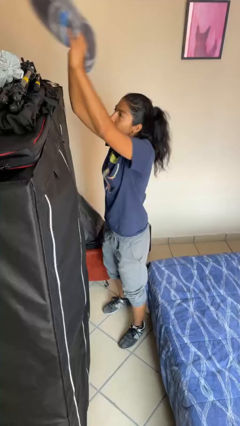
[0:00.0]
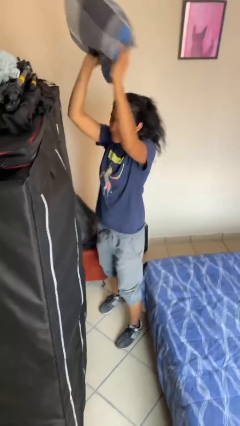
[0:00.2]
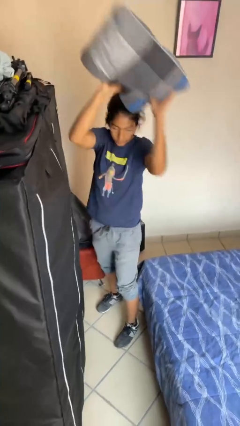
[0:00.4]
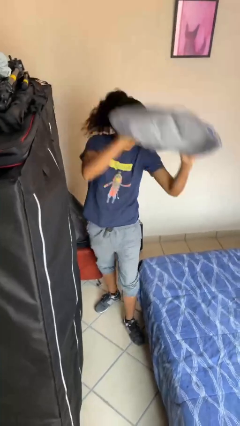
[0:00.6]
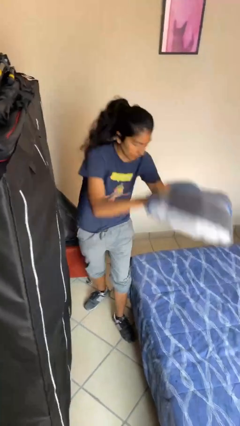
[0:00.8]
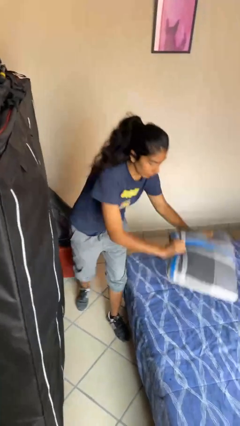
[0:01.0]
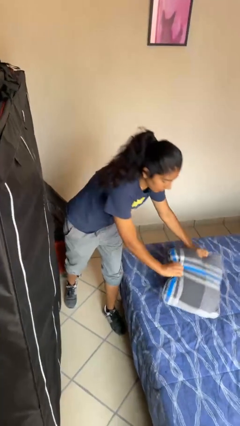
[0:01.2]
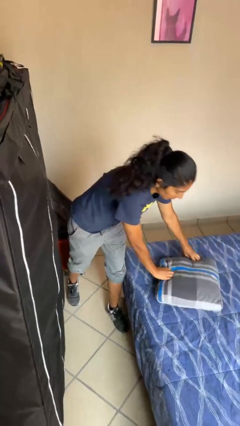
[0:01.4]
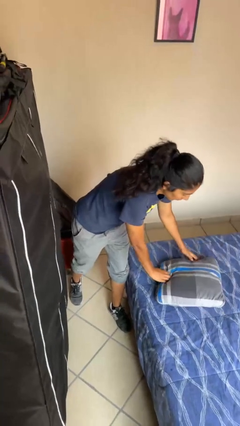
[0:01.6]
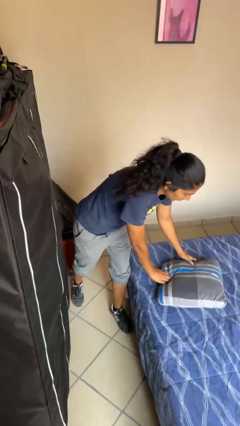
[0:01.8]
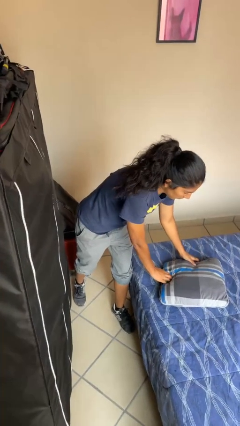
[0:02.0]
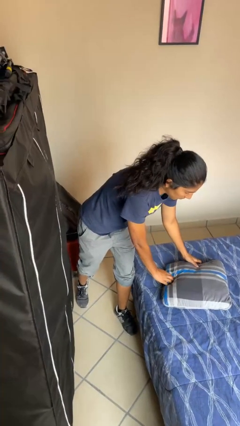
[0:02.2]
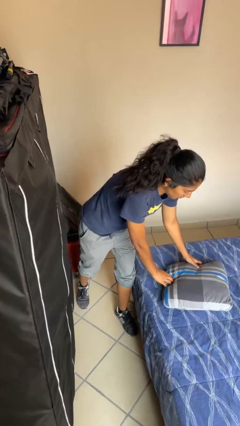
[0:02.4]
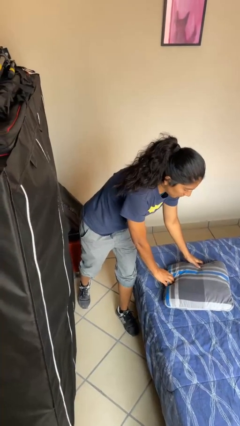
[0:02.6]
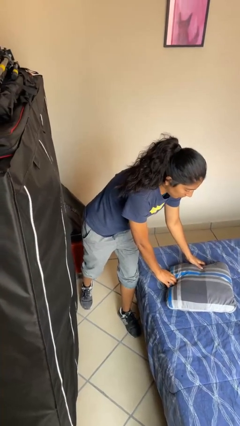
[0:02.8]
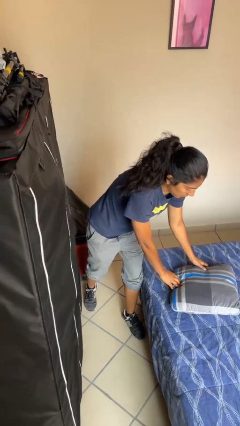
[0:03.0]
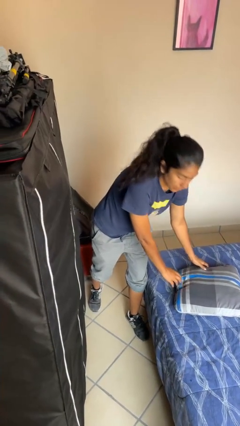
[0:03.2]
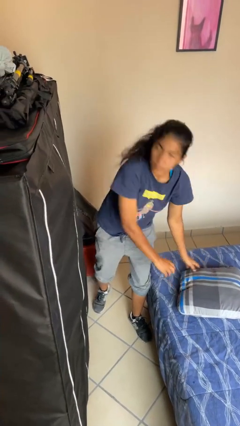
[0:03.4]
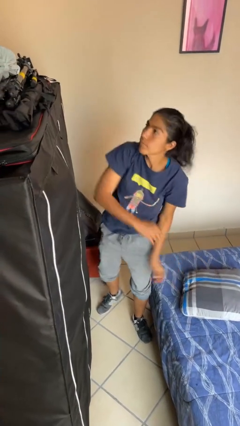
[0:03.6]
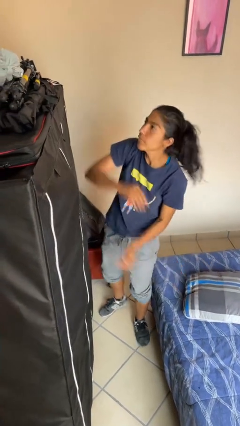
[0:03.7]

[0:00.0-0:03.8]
person puts down object on shelf

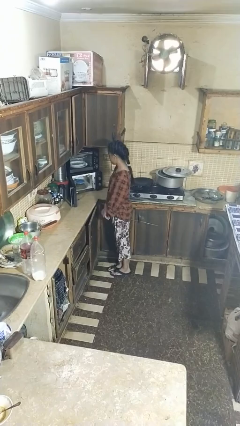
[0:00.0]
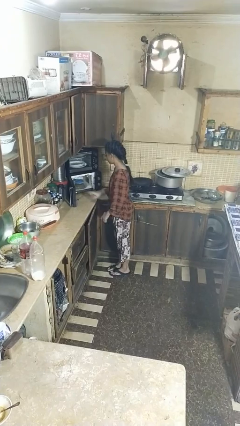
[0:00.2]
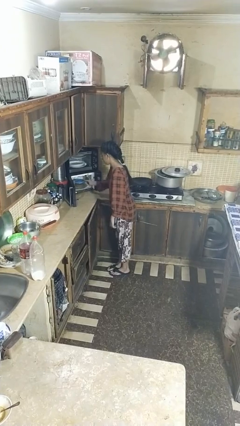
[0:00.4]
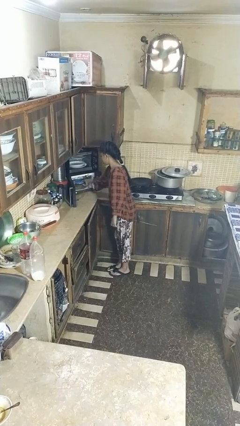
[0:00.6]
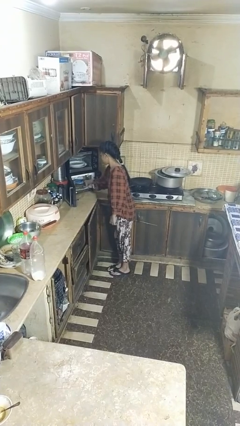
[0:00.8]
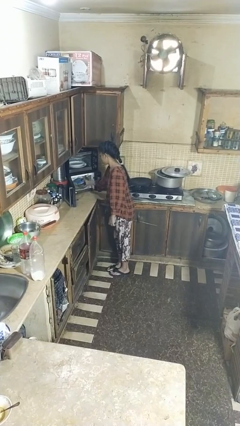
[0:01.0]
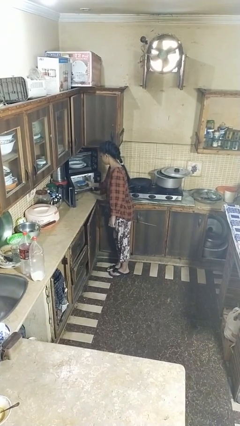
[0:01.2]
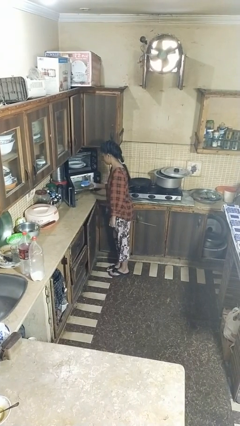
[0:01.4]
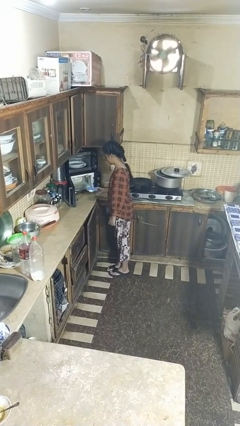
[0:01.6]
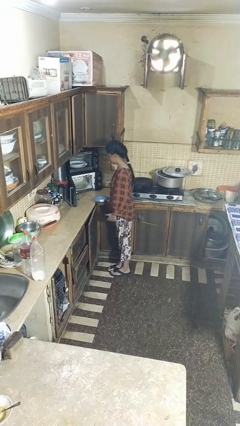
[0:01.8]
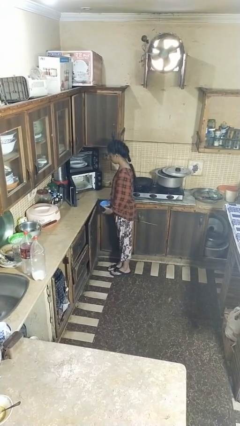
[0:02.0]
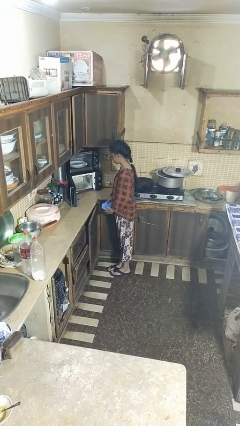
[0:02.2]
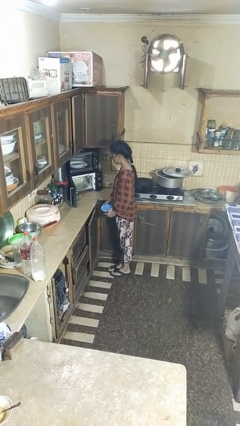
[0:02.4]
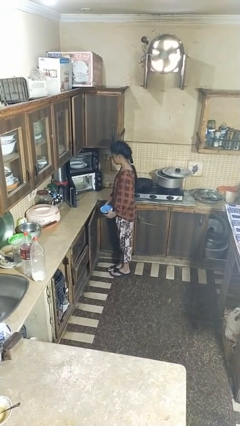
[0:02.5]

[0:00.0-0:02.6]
person takes object from microwave

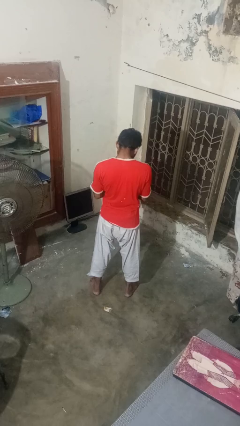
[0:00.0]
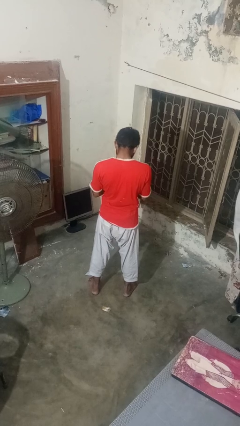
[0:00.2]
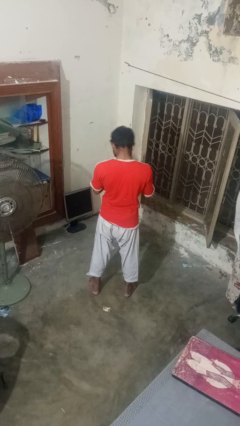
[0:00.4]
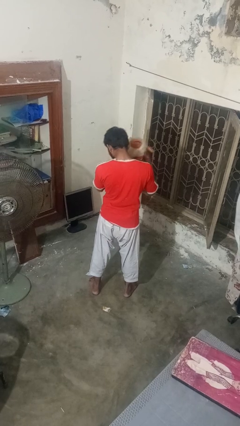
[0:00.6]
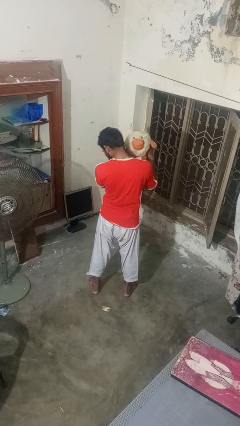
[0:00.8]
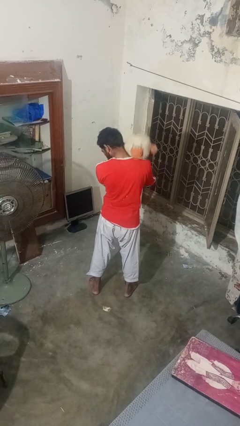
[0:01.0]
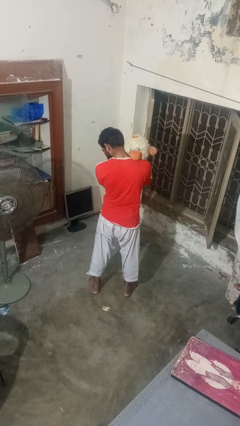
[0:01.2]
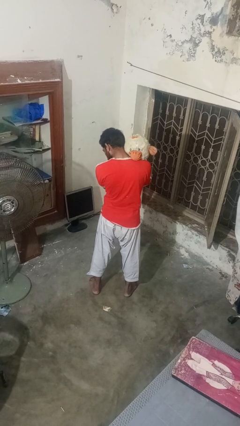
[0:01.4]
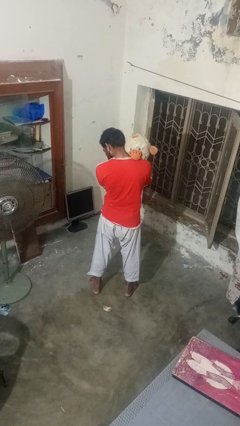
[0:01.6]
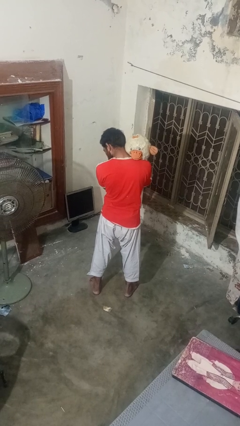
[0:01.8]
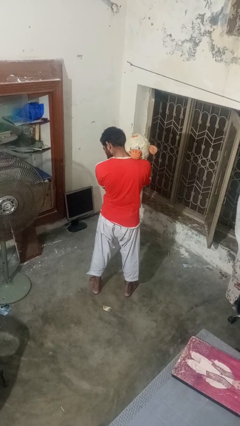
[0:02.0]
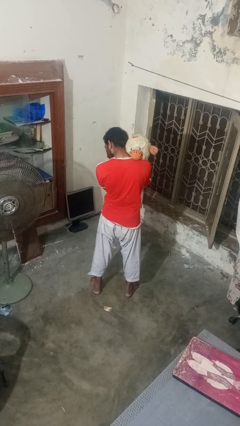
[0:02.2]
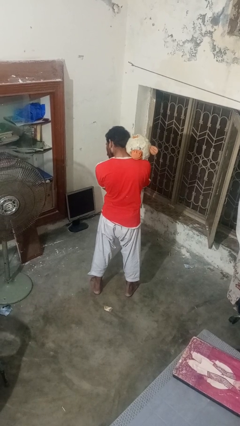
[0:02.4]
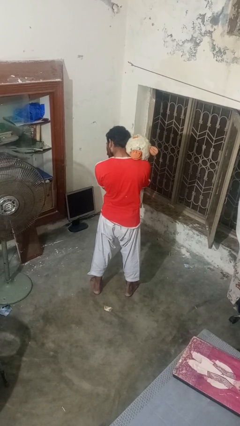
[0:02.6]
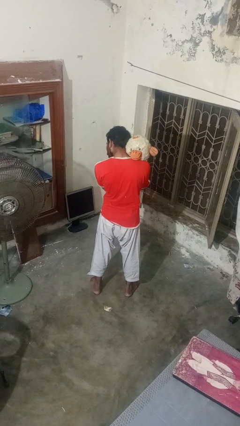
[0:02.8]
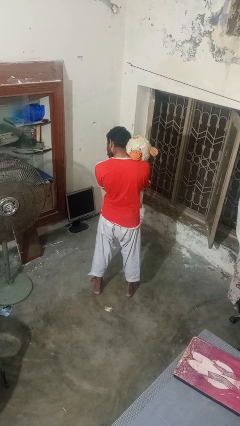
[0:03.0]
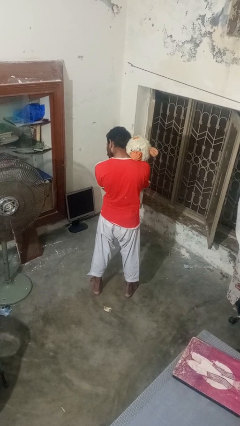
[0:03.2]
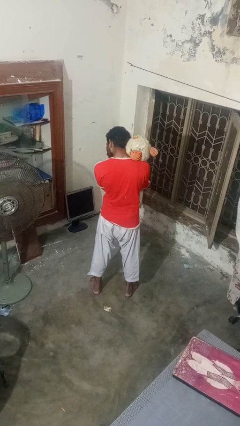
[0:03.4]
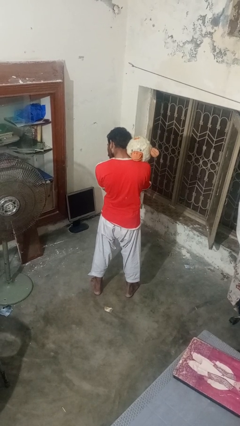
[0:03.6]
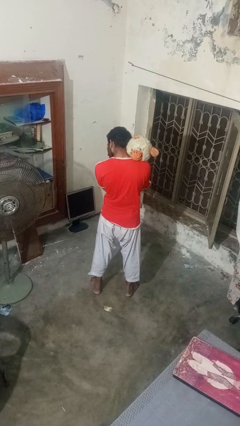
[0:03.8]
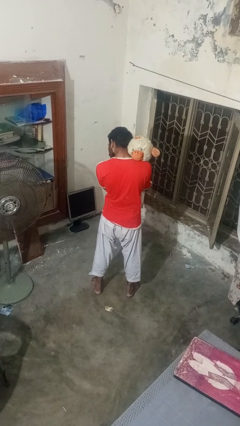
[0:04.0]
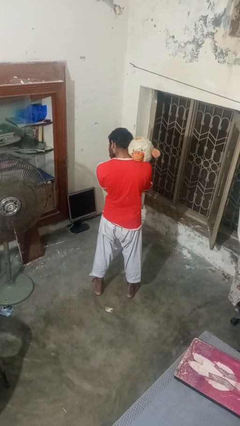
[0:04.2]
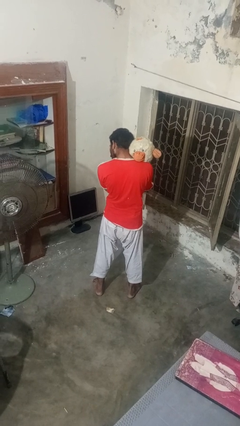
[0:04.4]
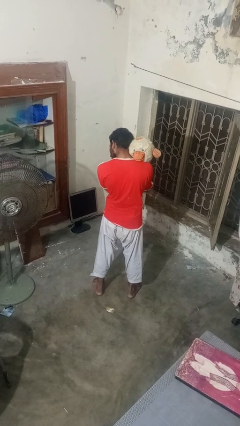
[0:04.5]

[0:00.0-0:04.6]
person hugs stuffed animal

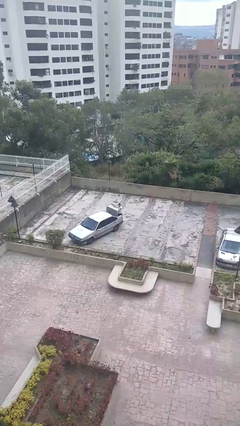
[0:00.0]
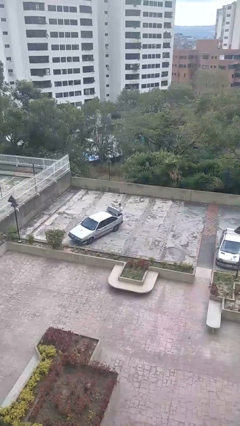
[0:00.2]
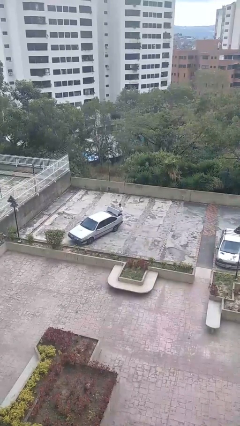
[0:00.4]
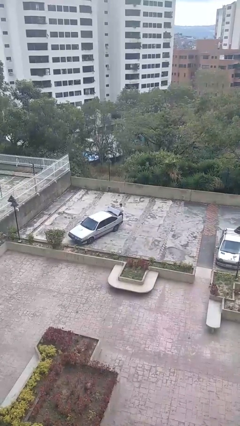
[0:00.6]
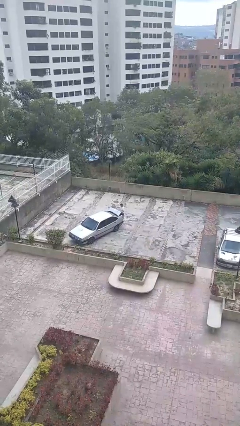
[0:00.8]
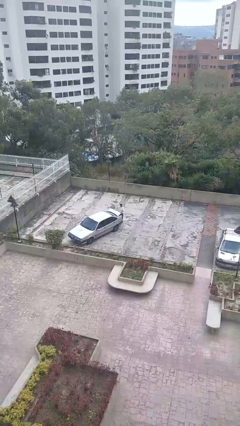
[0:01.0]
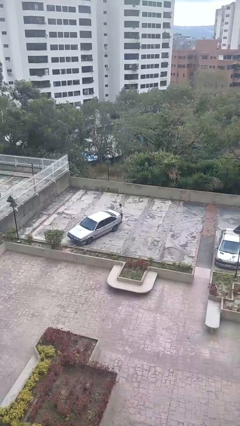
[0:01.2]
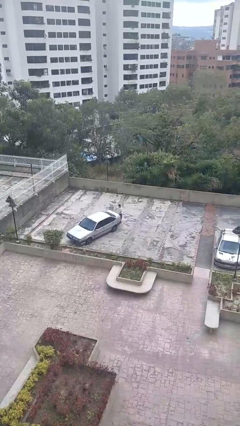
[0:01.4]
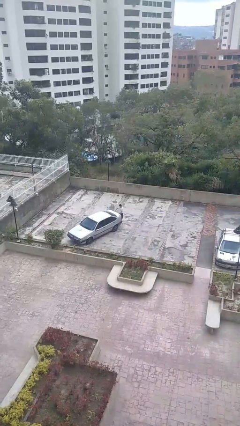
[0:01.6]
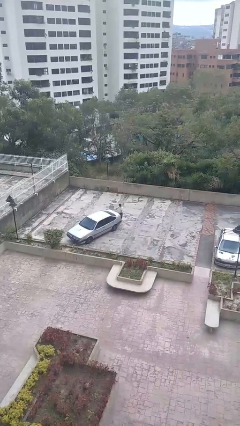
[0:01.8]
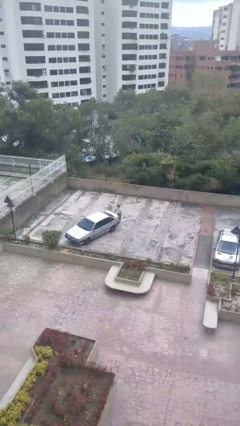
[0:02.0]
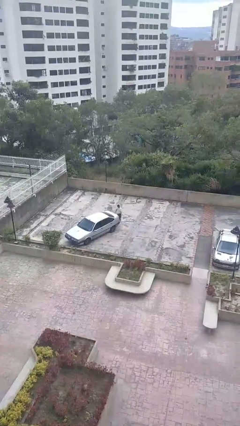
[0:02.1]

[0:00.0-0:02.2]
person closes car trunk

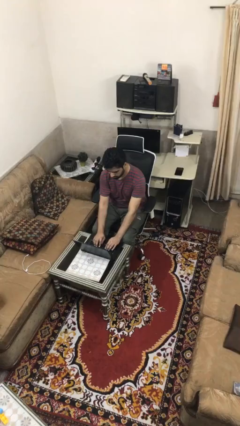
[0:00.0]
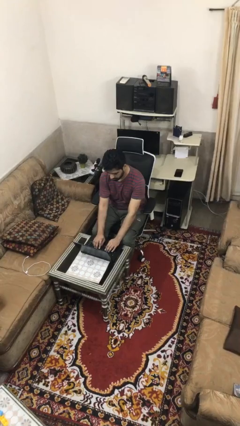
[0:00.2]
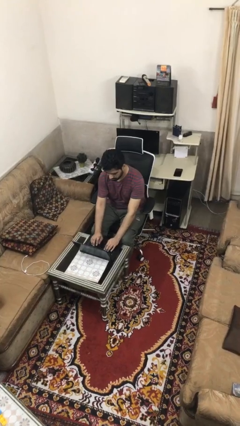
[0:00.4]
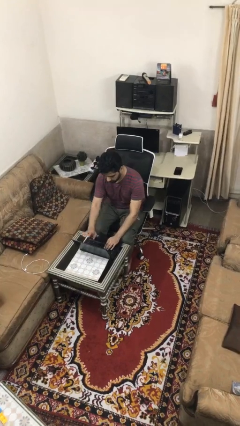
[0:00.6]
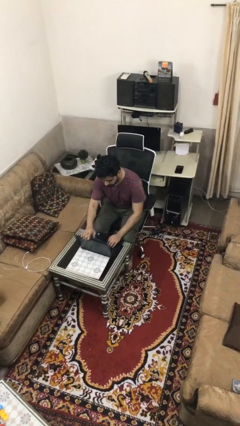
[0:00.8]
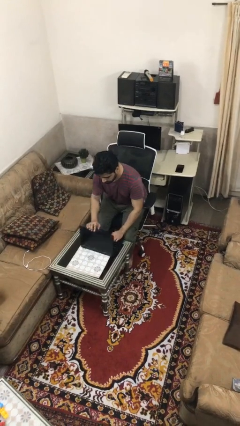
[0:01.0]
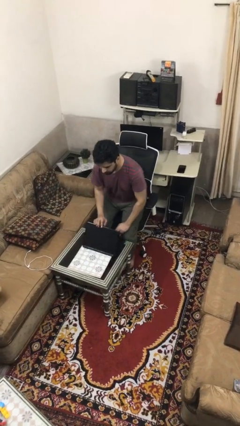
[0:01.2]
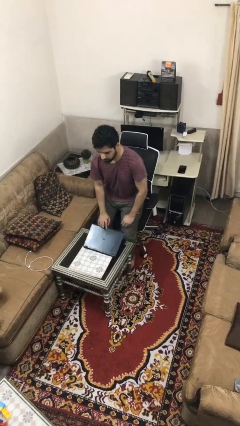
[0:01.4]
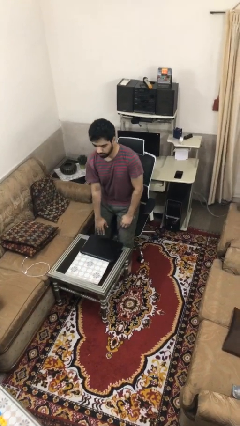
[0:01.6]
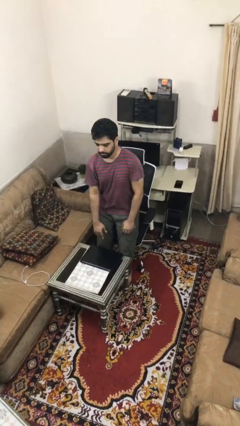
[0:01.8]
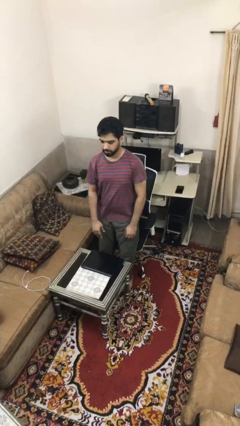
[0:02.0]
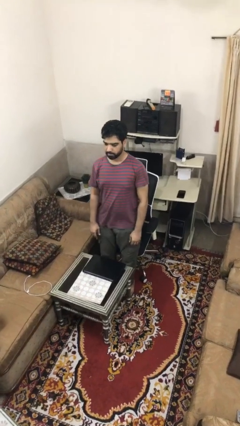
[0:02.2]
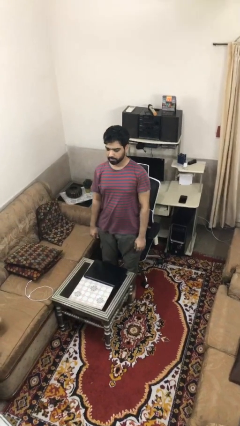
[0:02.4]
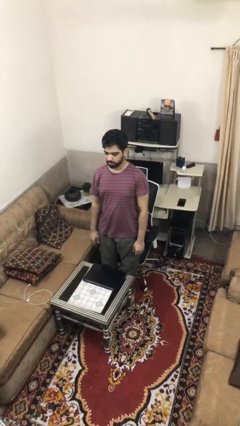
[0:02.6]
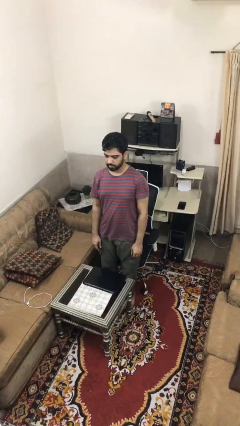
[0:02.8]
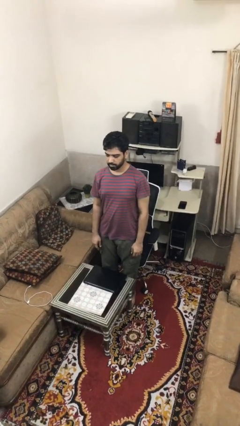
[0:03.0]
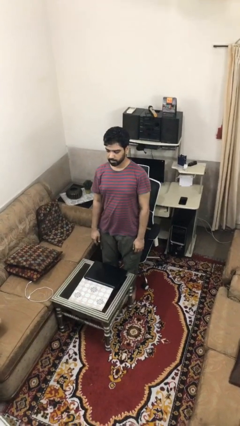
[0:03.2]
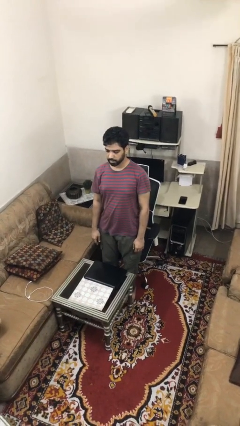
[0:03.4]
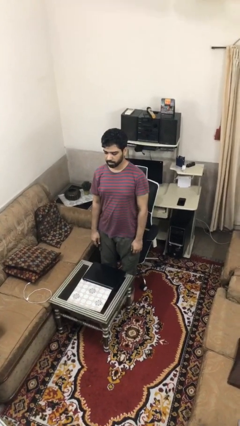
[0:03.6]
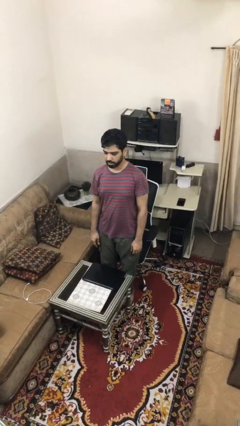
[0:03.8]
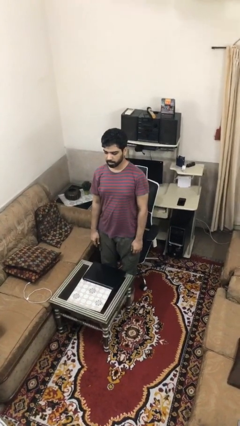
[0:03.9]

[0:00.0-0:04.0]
person stands up

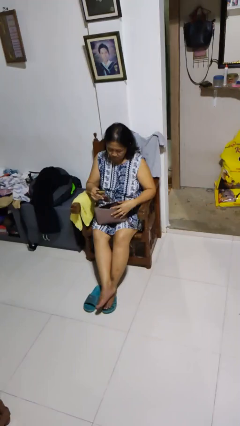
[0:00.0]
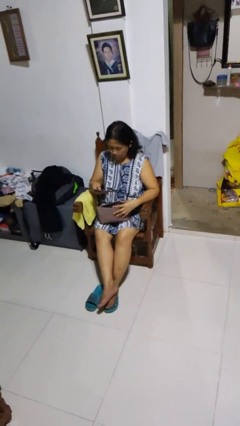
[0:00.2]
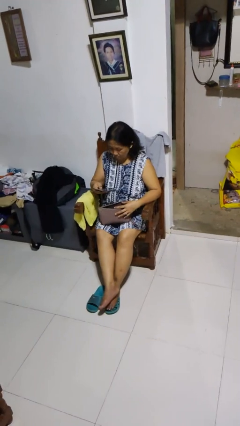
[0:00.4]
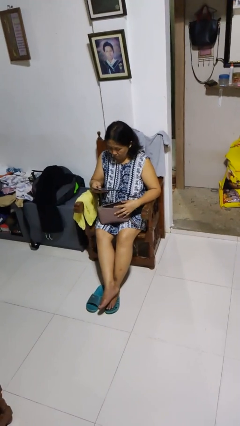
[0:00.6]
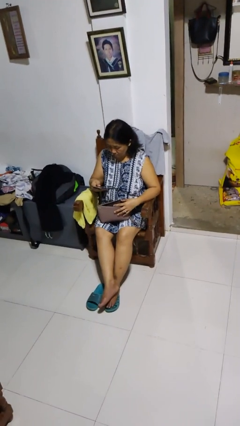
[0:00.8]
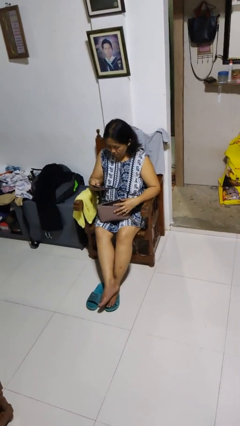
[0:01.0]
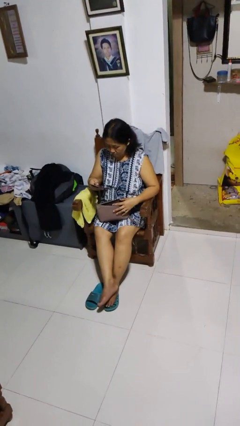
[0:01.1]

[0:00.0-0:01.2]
person takes object from purse
